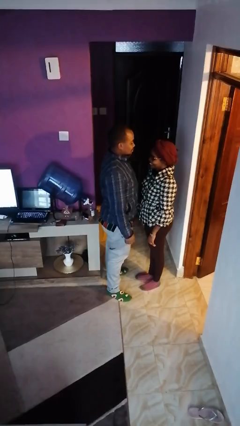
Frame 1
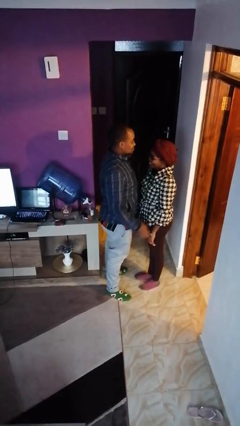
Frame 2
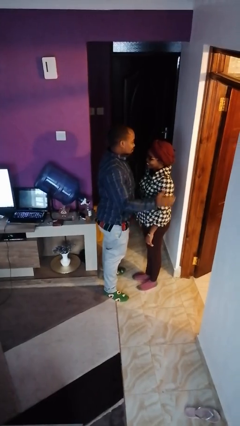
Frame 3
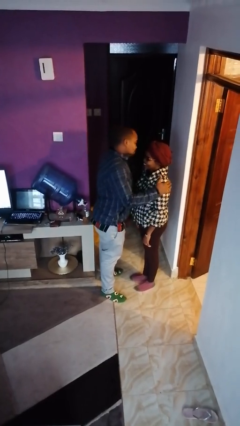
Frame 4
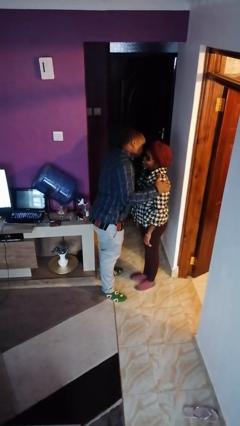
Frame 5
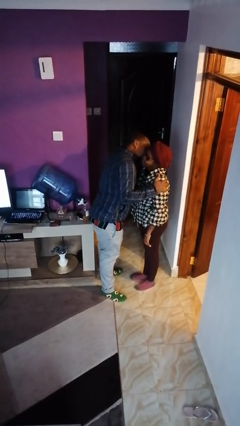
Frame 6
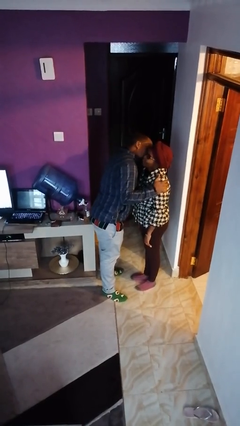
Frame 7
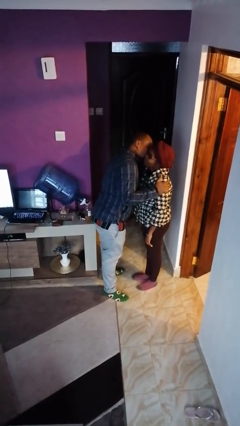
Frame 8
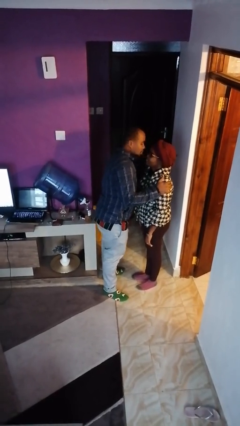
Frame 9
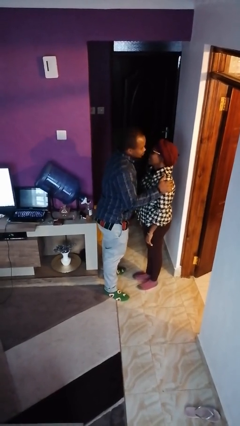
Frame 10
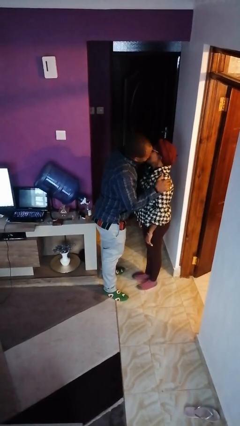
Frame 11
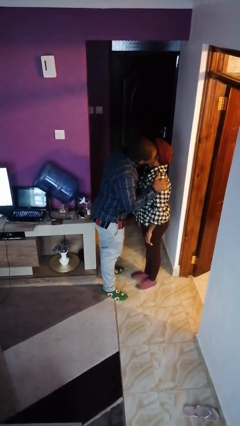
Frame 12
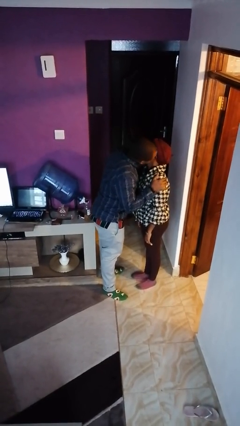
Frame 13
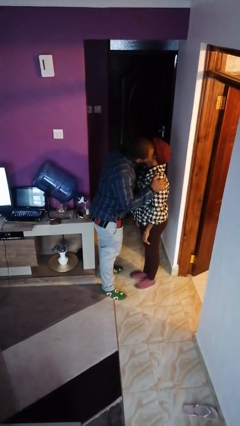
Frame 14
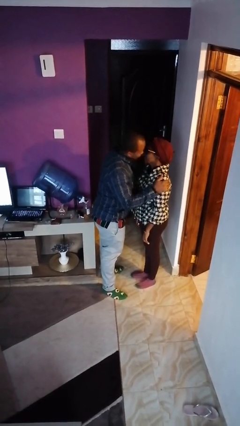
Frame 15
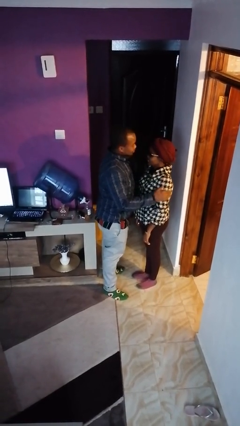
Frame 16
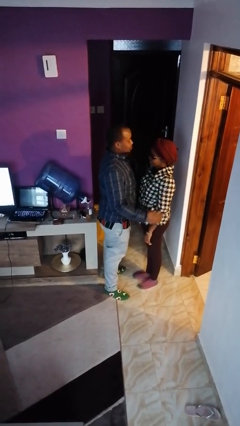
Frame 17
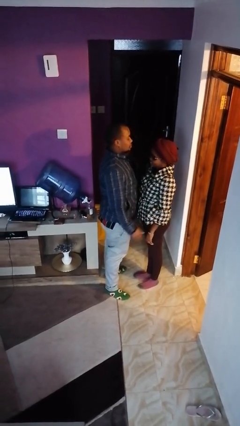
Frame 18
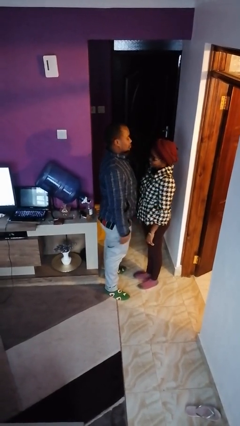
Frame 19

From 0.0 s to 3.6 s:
person kisses cheek of person

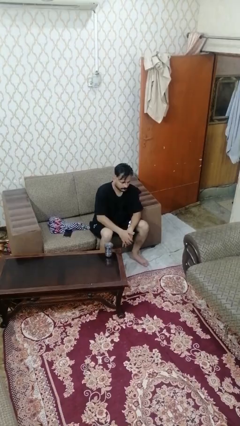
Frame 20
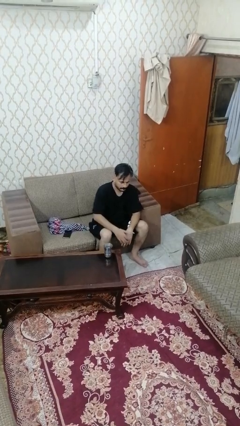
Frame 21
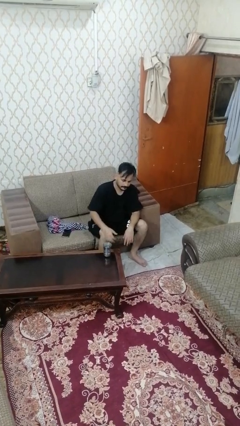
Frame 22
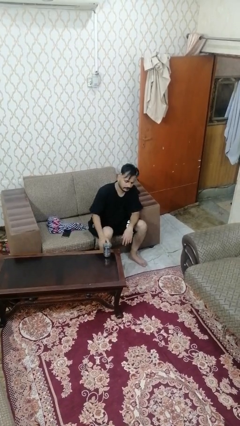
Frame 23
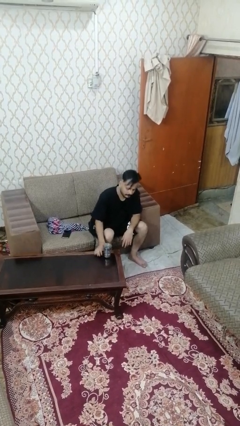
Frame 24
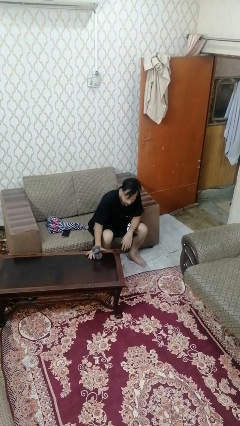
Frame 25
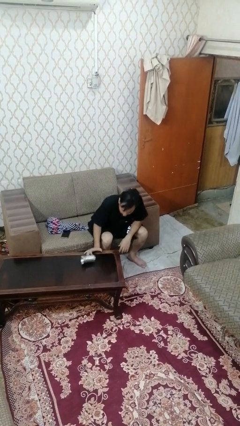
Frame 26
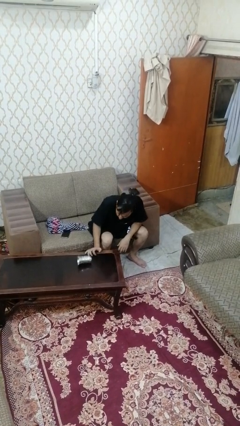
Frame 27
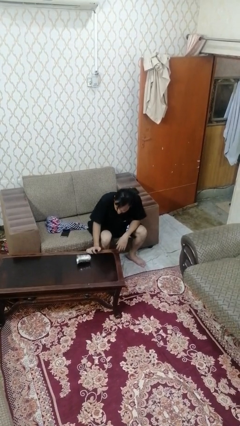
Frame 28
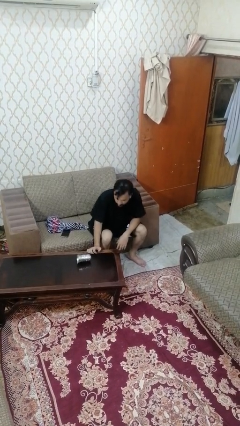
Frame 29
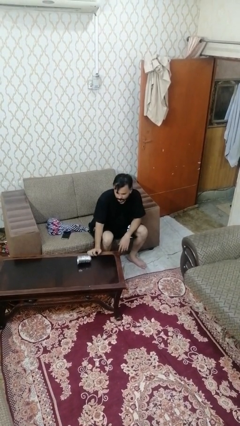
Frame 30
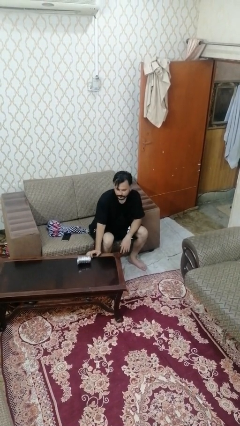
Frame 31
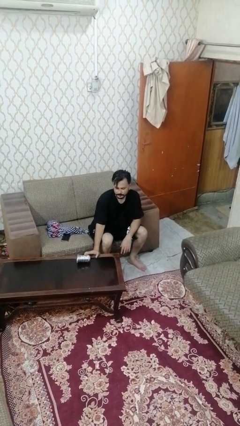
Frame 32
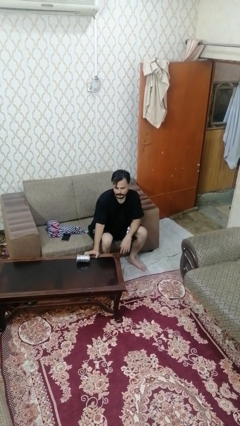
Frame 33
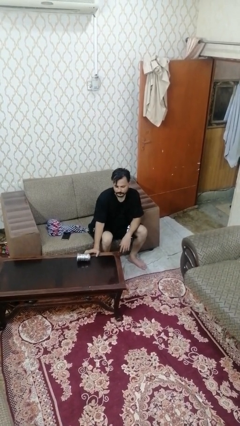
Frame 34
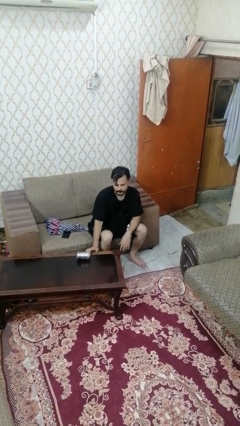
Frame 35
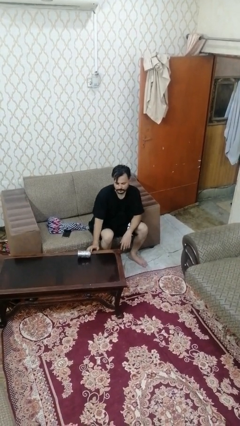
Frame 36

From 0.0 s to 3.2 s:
person knocks over glass

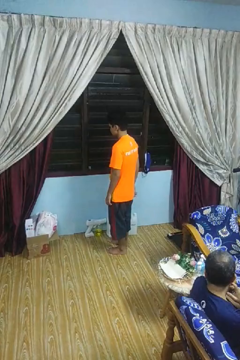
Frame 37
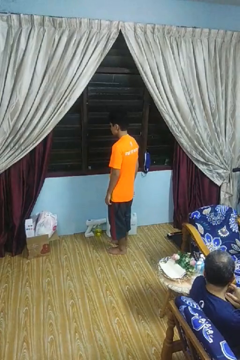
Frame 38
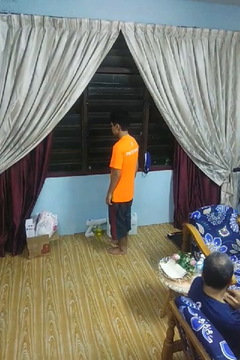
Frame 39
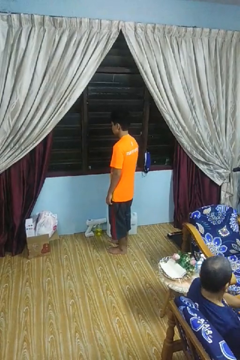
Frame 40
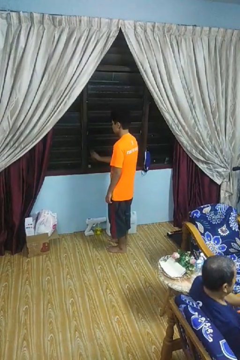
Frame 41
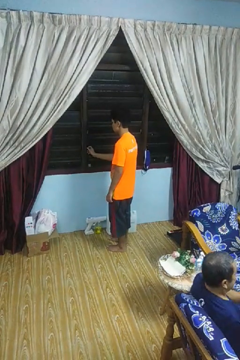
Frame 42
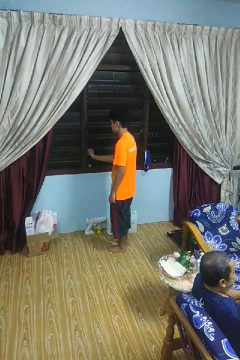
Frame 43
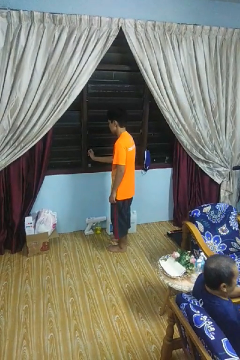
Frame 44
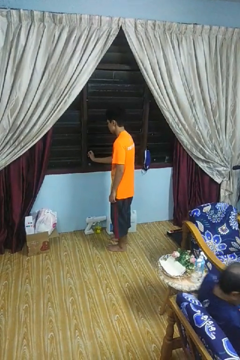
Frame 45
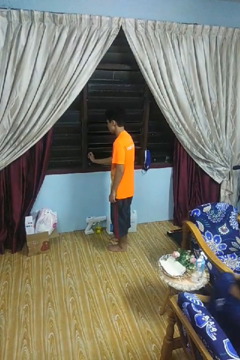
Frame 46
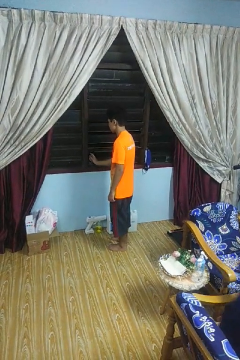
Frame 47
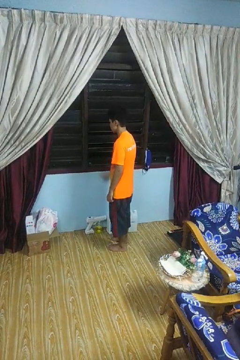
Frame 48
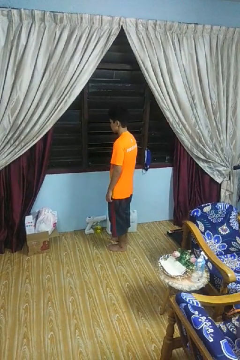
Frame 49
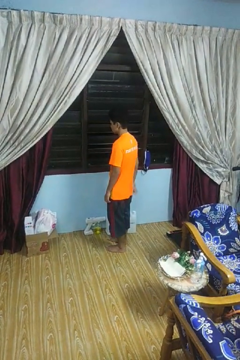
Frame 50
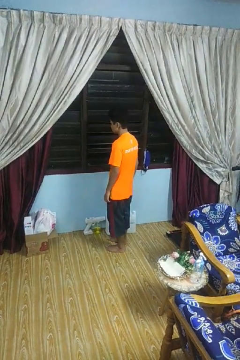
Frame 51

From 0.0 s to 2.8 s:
person opens home window

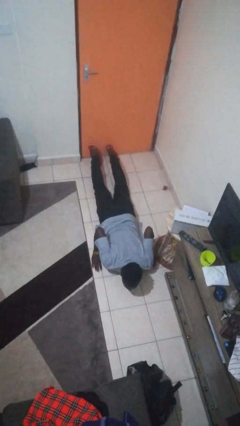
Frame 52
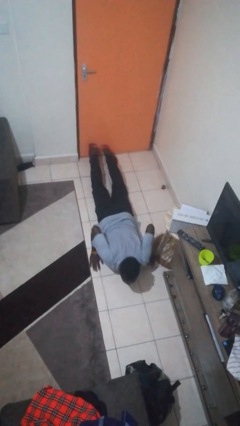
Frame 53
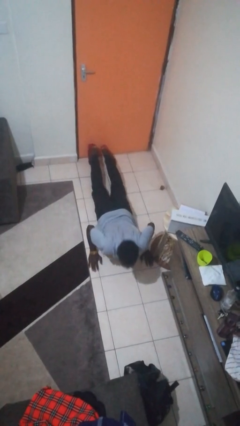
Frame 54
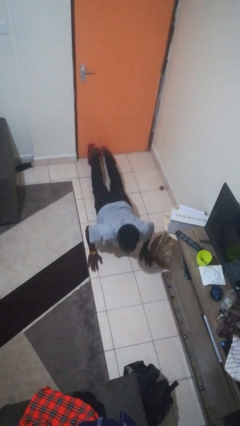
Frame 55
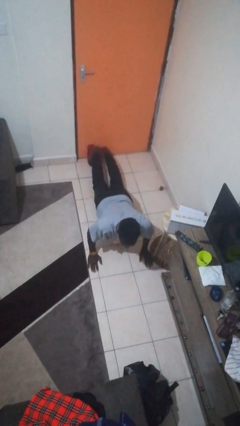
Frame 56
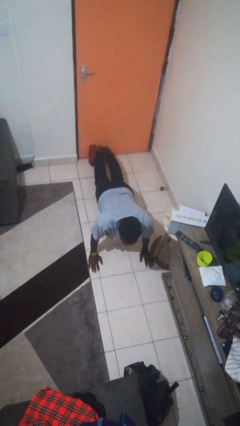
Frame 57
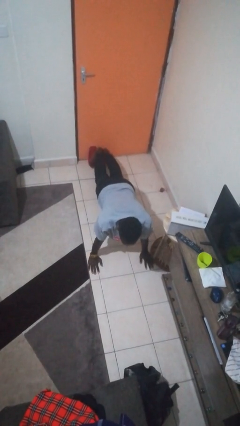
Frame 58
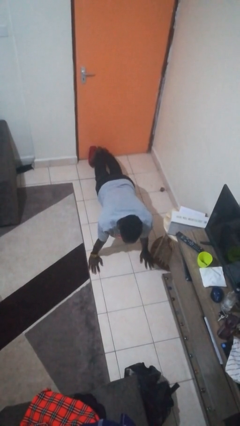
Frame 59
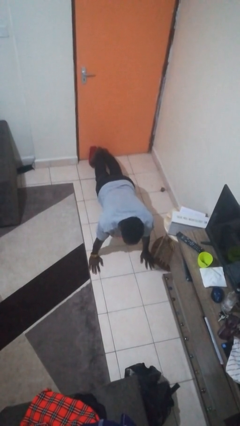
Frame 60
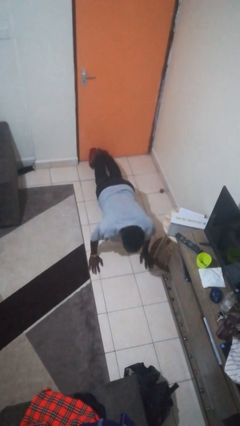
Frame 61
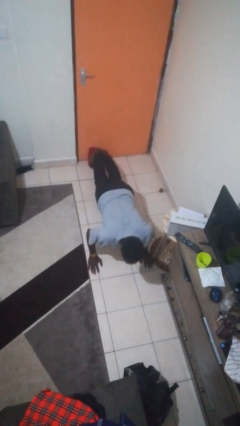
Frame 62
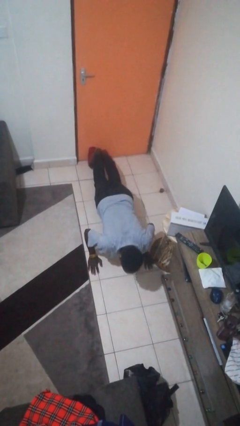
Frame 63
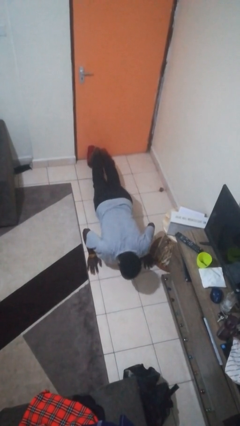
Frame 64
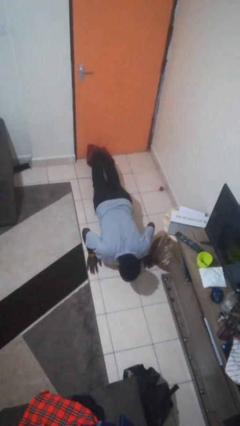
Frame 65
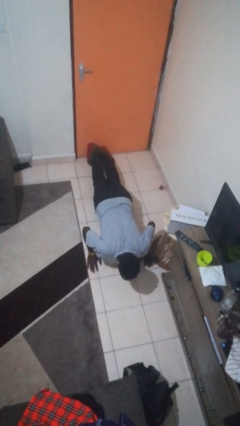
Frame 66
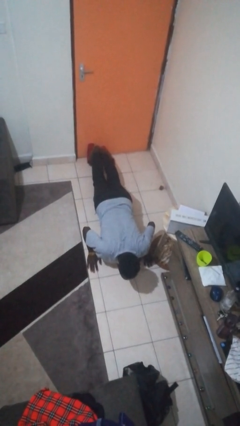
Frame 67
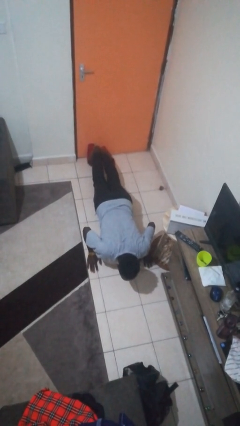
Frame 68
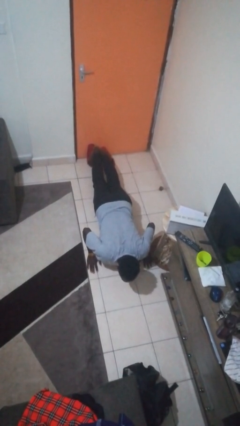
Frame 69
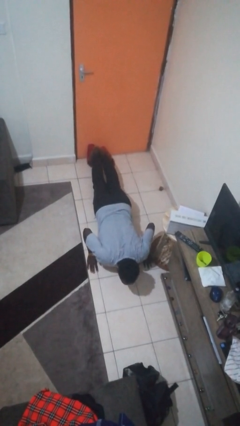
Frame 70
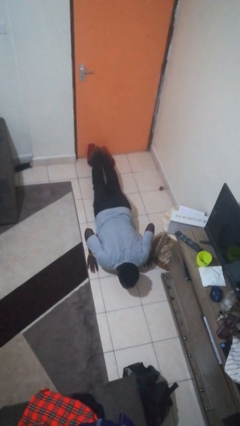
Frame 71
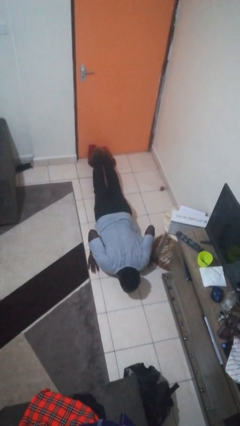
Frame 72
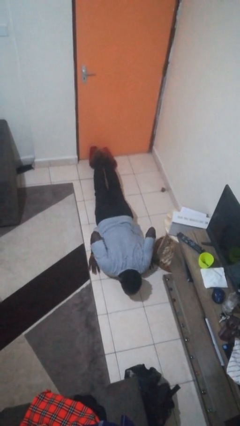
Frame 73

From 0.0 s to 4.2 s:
person exercises with pushup

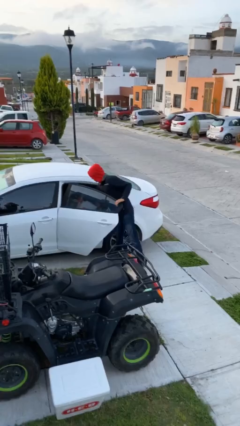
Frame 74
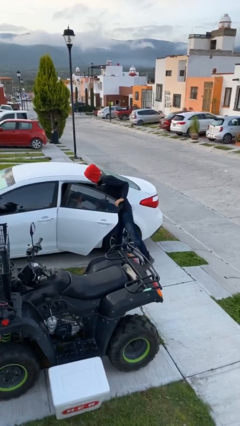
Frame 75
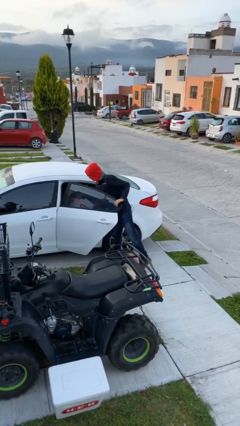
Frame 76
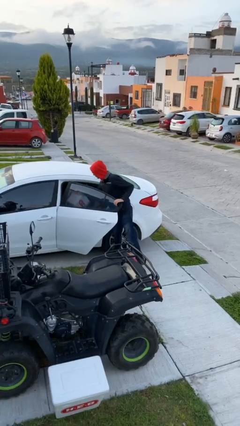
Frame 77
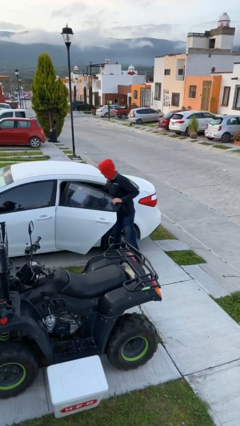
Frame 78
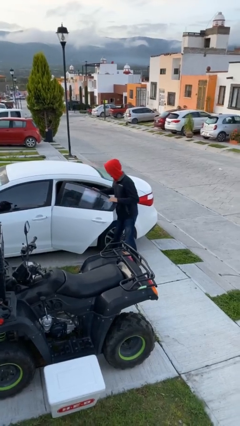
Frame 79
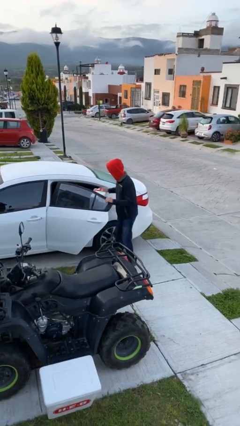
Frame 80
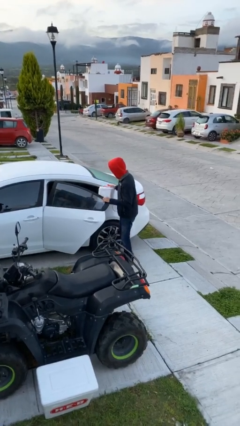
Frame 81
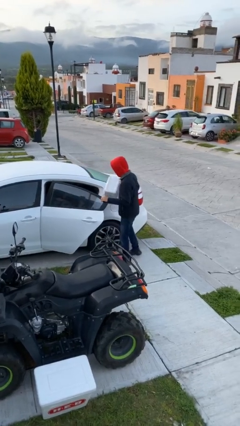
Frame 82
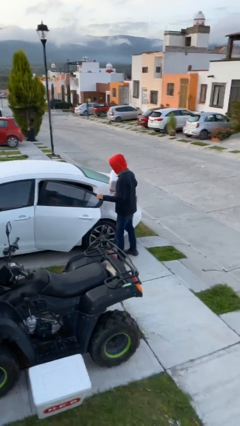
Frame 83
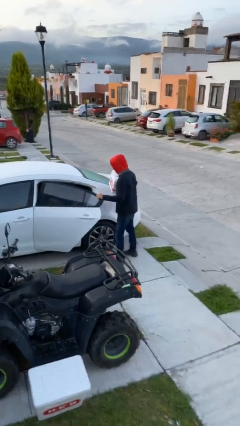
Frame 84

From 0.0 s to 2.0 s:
person unloads car

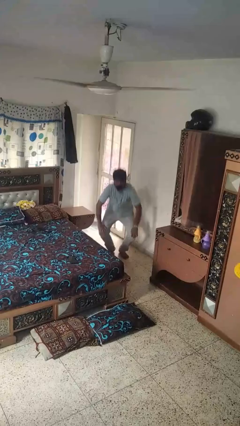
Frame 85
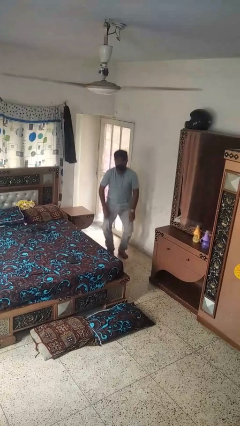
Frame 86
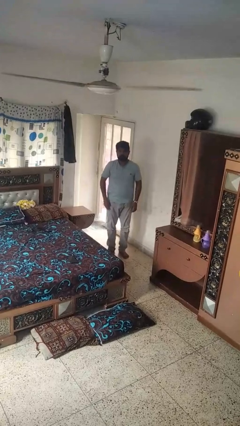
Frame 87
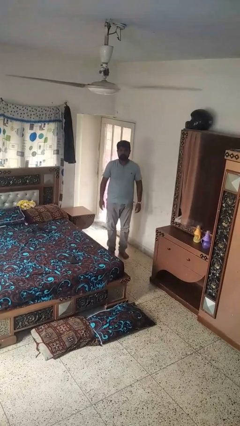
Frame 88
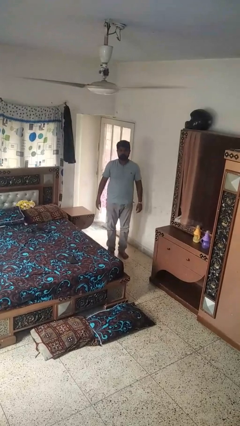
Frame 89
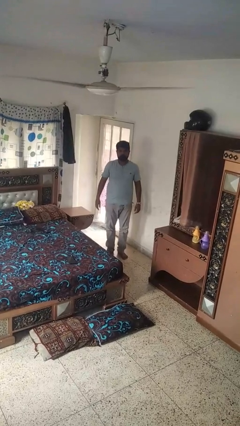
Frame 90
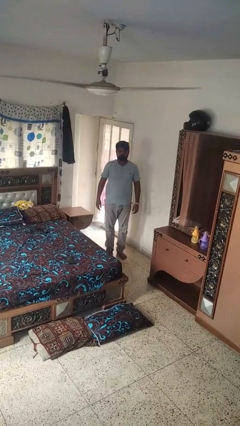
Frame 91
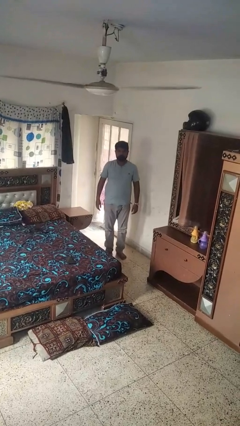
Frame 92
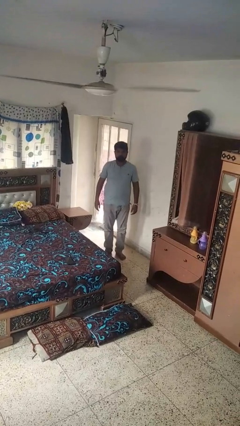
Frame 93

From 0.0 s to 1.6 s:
person stands up

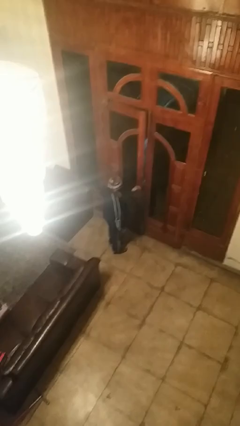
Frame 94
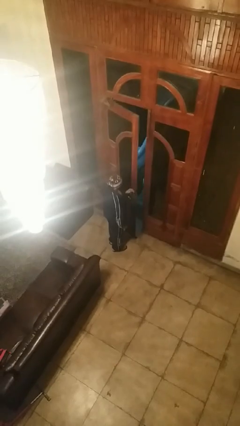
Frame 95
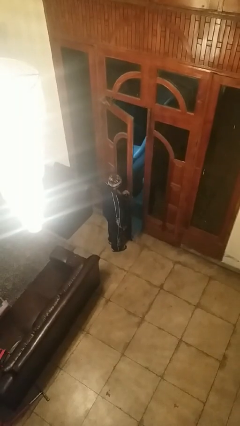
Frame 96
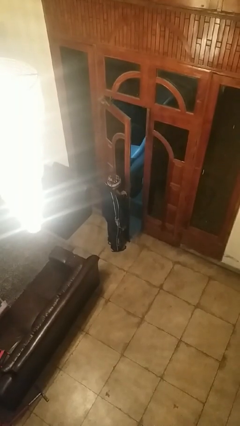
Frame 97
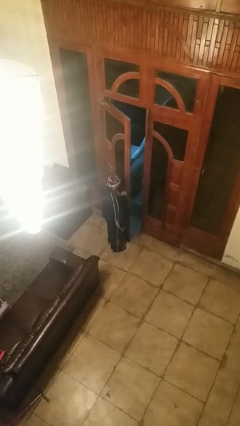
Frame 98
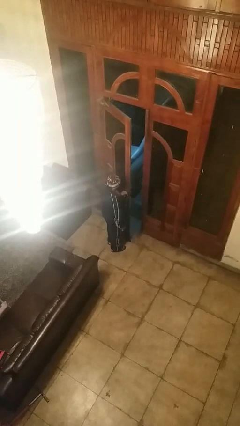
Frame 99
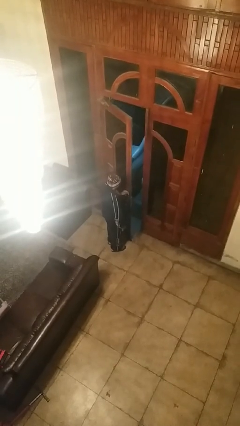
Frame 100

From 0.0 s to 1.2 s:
person opens facility door
